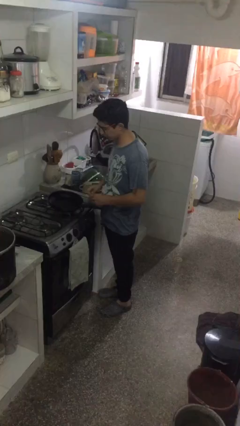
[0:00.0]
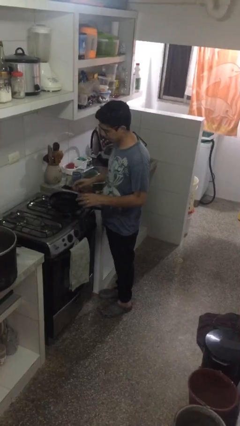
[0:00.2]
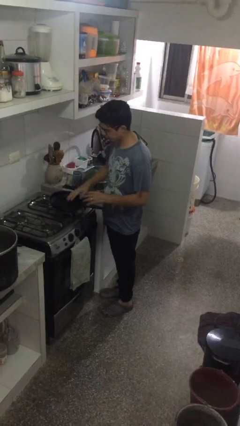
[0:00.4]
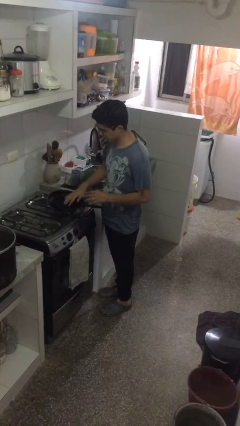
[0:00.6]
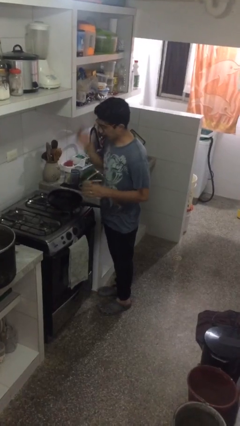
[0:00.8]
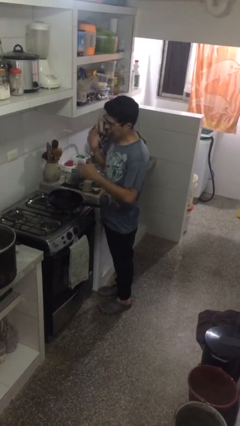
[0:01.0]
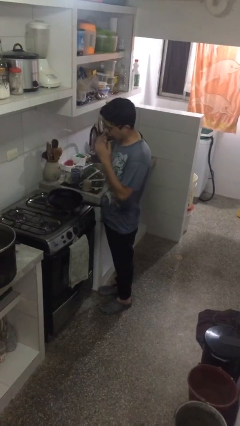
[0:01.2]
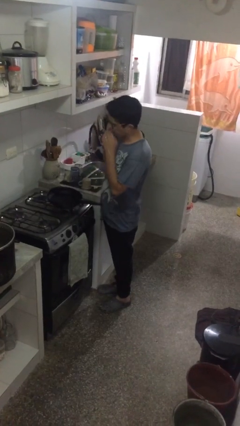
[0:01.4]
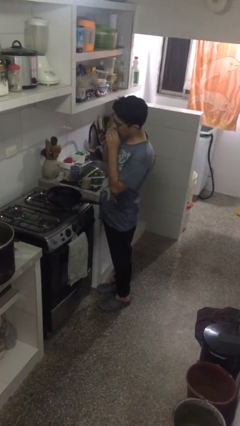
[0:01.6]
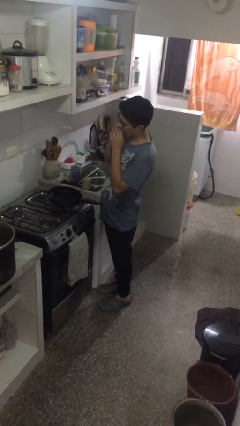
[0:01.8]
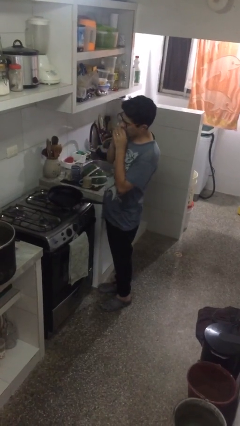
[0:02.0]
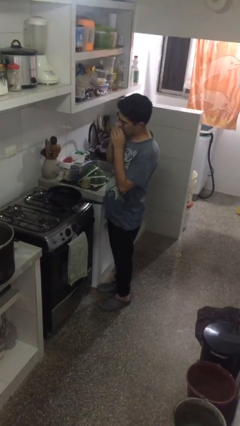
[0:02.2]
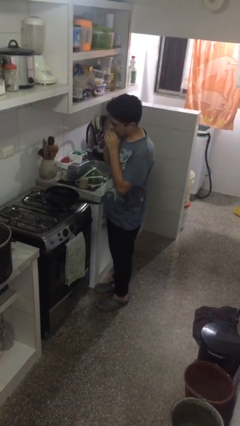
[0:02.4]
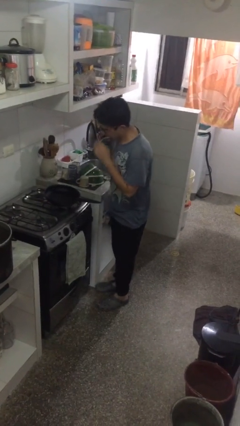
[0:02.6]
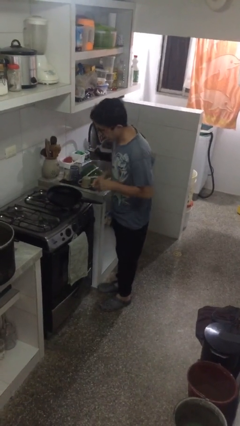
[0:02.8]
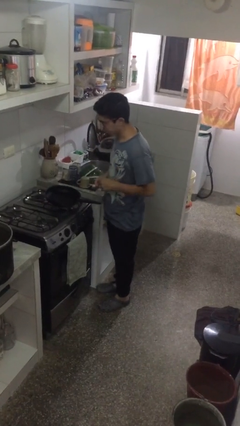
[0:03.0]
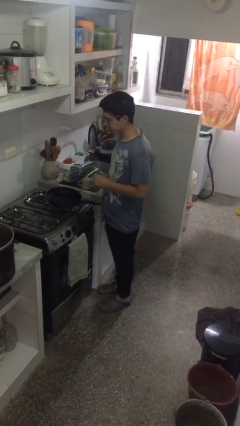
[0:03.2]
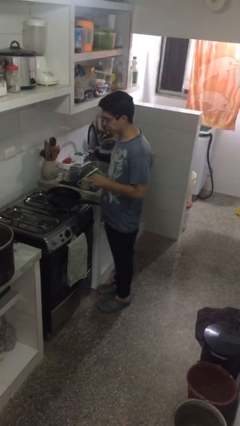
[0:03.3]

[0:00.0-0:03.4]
person burns hand

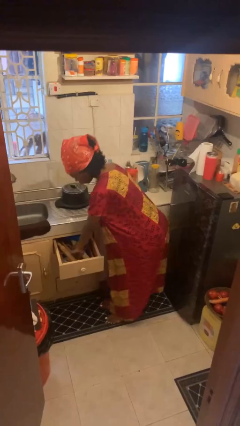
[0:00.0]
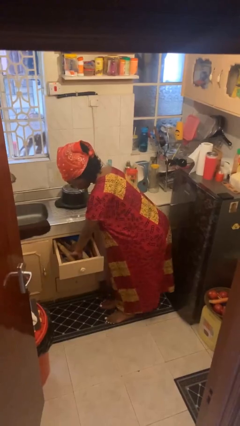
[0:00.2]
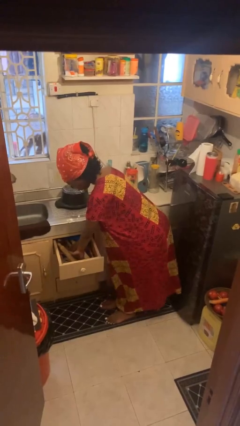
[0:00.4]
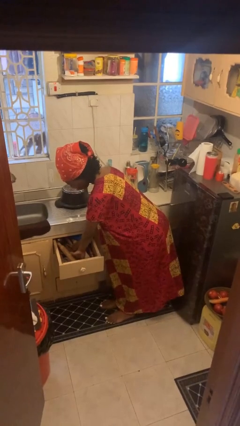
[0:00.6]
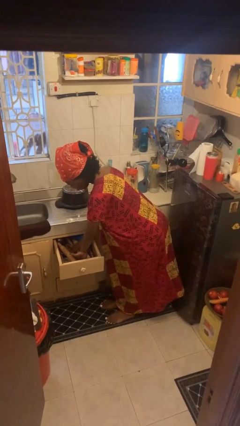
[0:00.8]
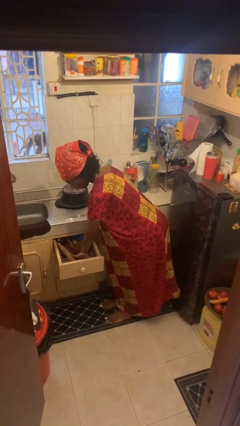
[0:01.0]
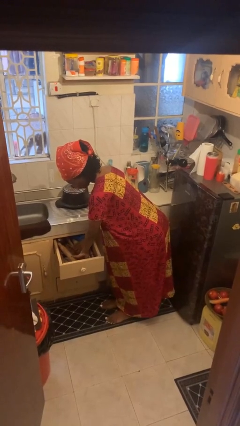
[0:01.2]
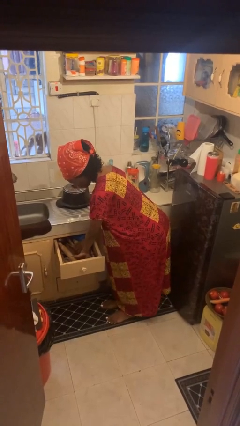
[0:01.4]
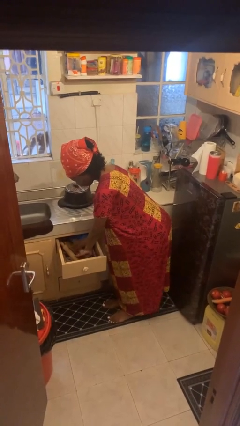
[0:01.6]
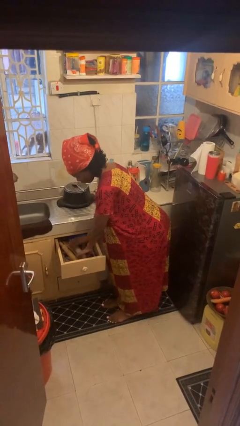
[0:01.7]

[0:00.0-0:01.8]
person searches in kitchen drawer

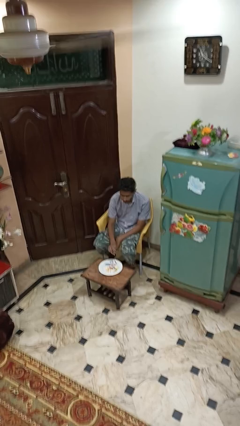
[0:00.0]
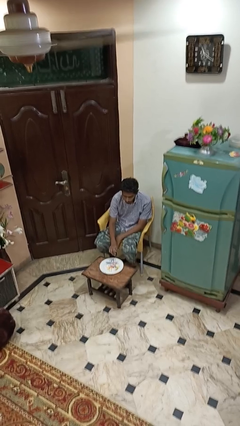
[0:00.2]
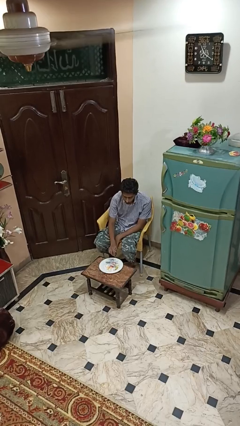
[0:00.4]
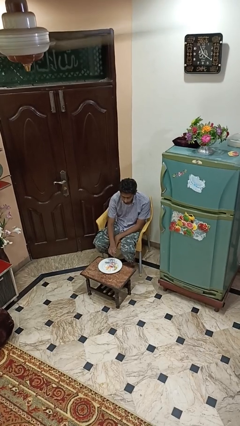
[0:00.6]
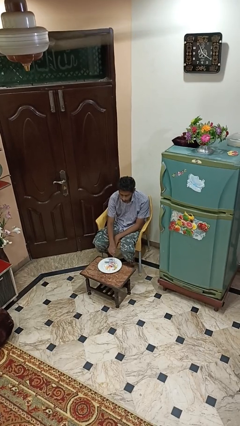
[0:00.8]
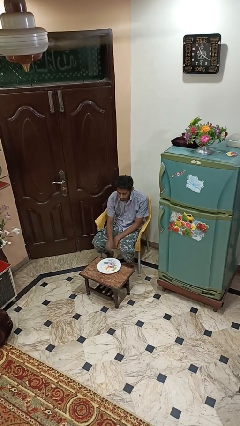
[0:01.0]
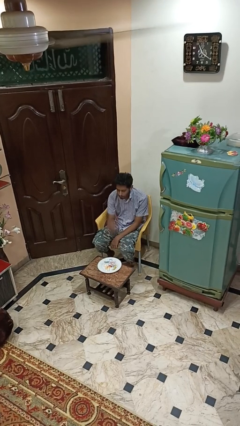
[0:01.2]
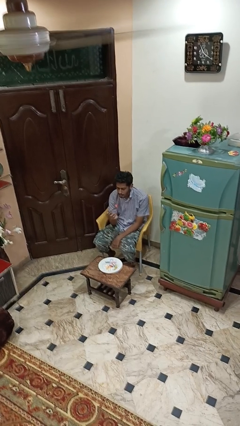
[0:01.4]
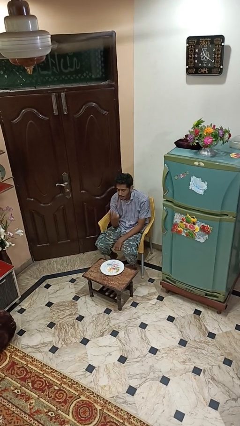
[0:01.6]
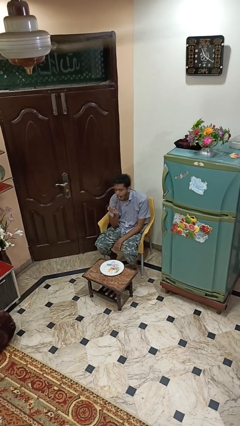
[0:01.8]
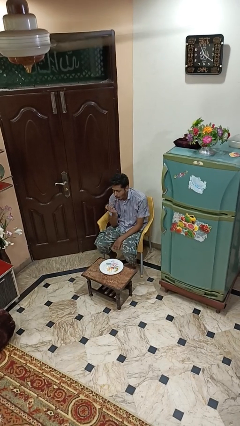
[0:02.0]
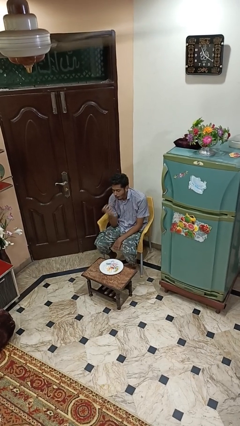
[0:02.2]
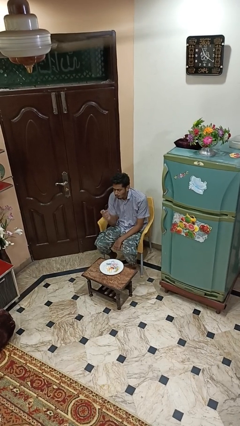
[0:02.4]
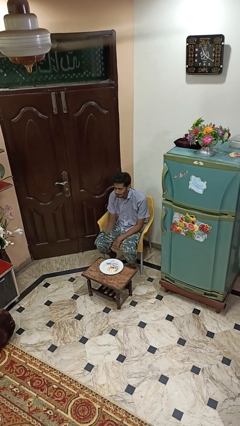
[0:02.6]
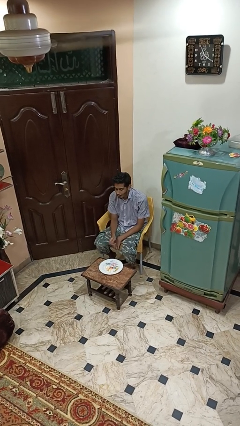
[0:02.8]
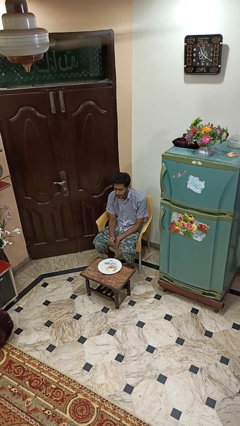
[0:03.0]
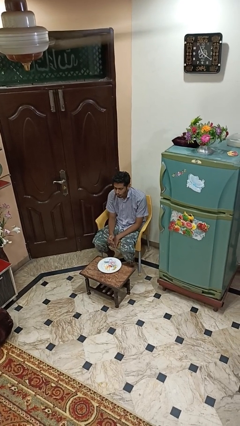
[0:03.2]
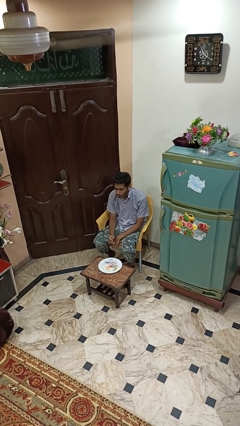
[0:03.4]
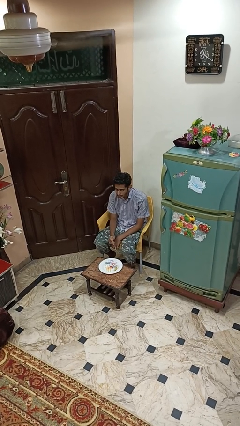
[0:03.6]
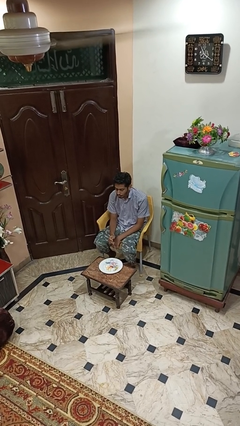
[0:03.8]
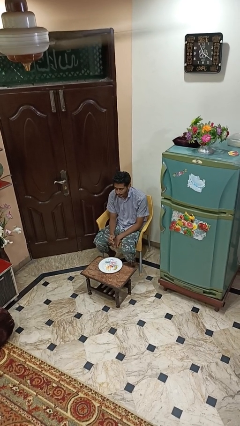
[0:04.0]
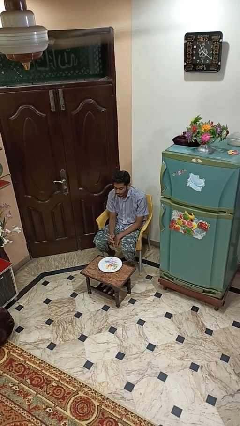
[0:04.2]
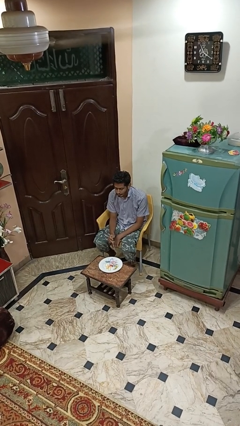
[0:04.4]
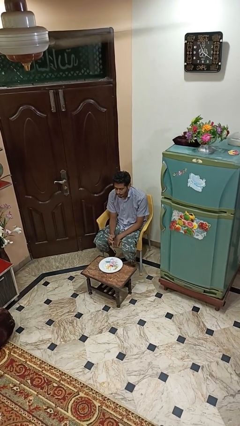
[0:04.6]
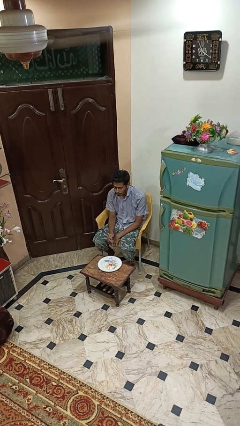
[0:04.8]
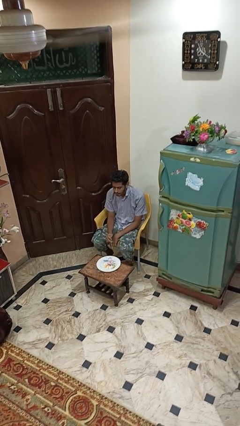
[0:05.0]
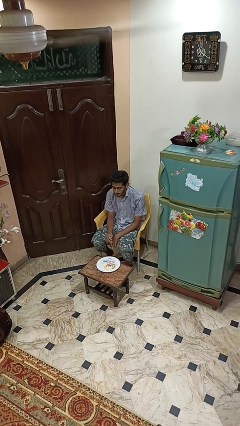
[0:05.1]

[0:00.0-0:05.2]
person eats with utensil

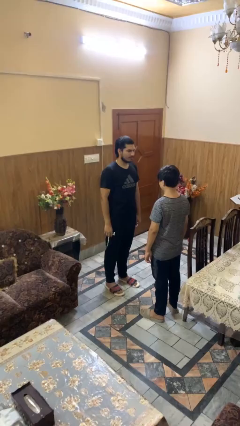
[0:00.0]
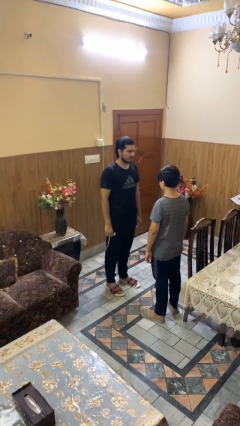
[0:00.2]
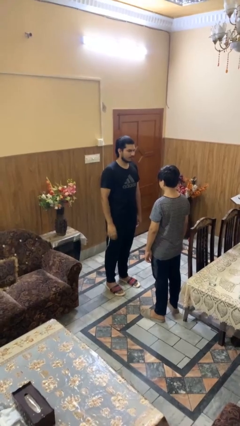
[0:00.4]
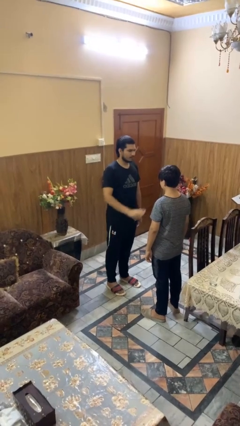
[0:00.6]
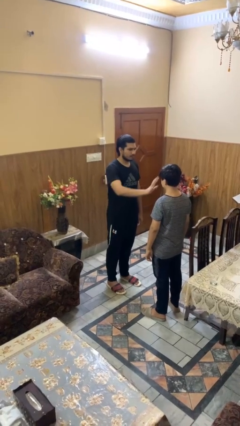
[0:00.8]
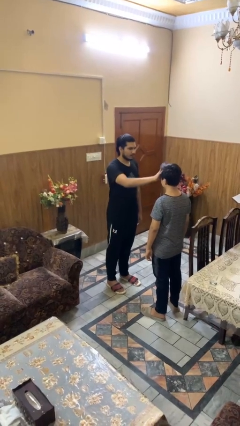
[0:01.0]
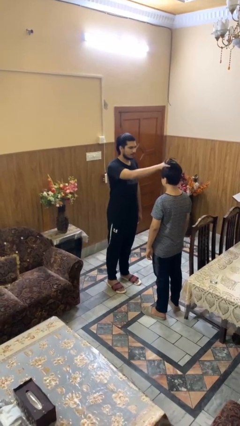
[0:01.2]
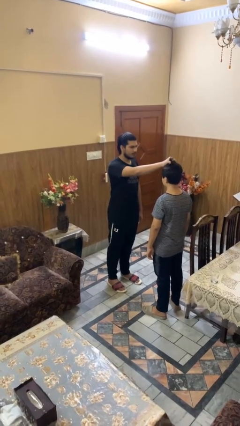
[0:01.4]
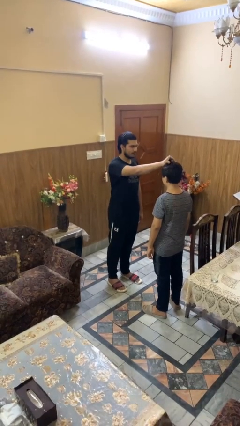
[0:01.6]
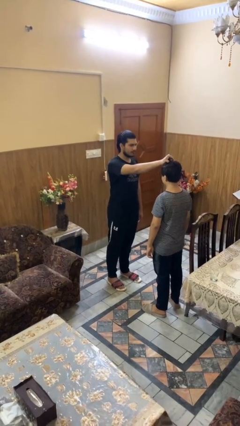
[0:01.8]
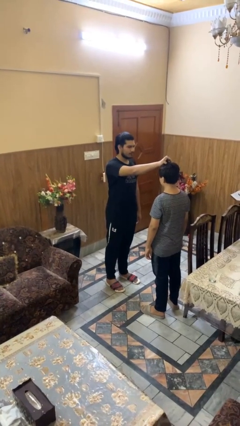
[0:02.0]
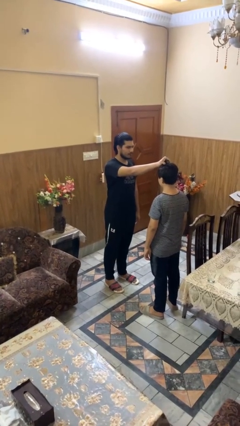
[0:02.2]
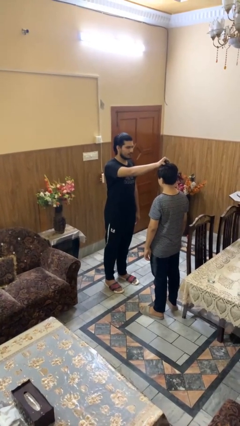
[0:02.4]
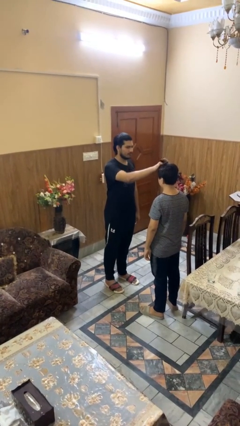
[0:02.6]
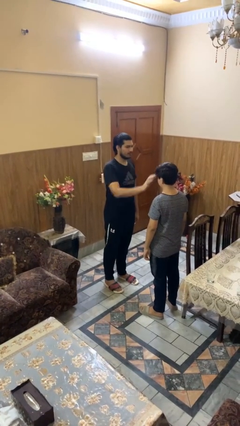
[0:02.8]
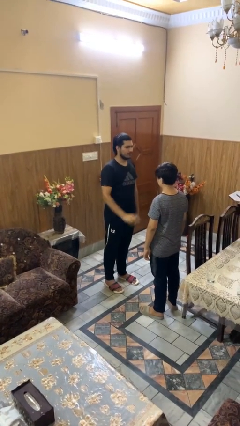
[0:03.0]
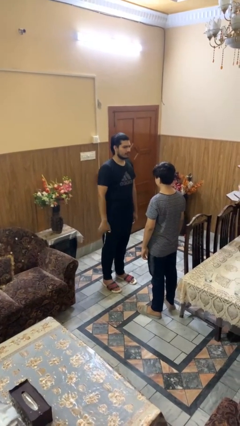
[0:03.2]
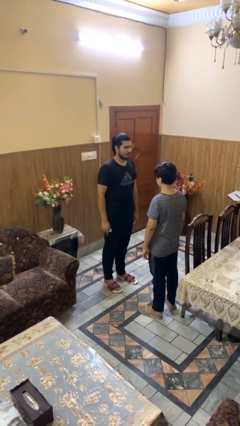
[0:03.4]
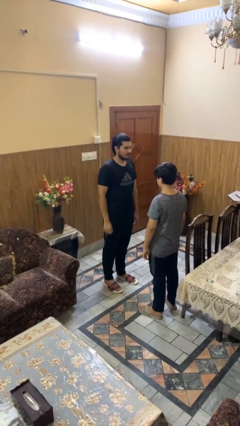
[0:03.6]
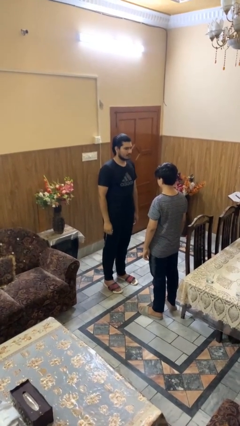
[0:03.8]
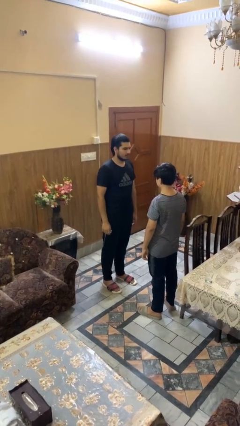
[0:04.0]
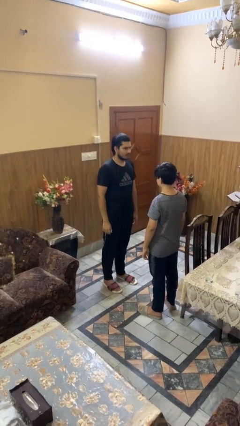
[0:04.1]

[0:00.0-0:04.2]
person grabs person by hair

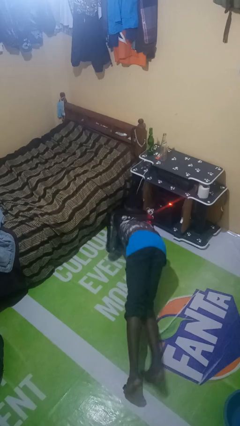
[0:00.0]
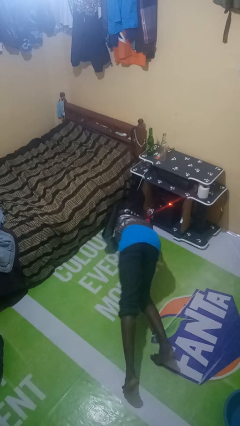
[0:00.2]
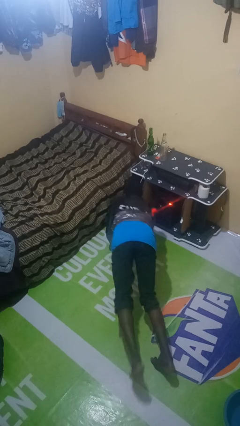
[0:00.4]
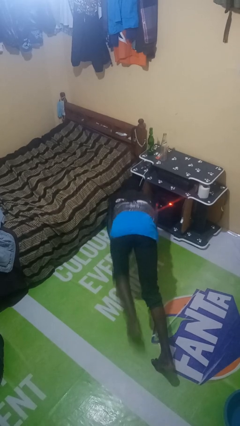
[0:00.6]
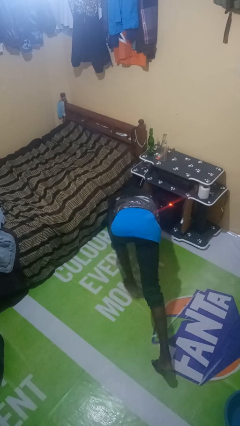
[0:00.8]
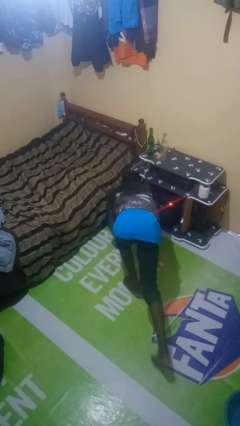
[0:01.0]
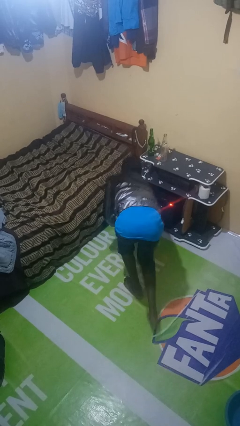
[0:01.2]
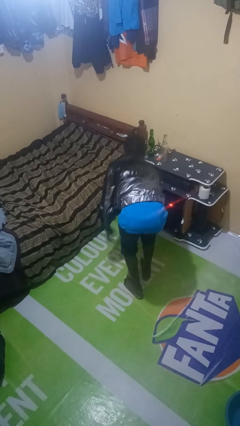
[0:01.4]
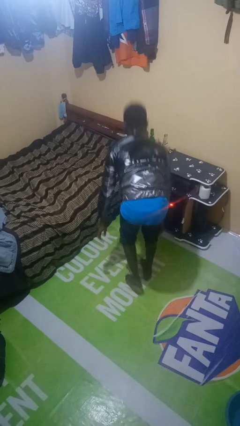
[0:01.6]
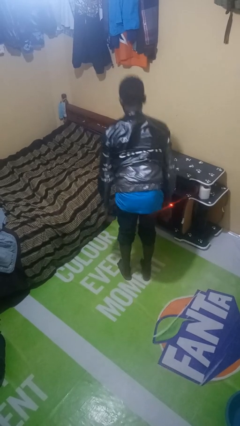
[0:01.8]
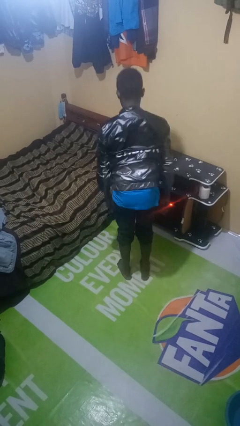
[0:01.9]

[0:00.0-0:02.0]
person stands up from floor

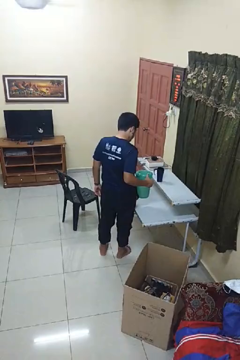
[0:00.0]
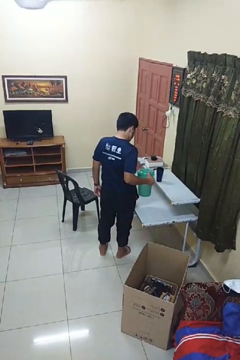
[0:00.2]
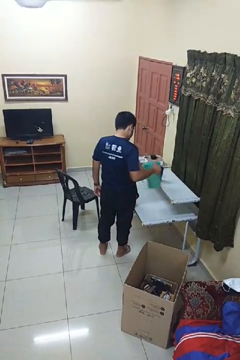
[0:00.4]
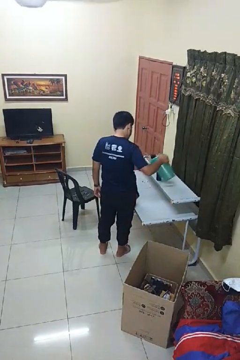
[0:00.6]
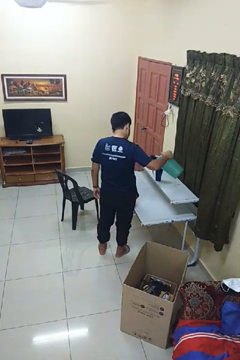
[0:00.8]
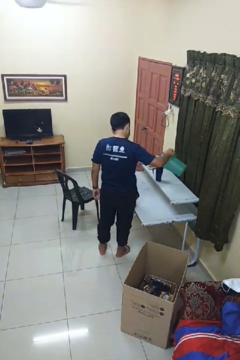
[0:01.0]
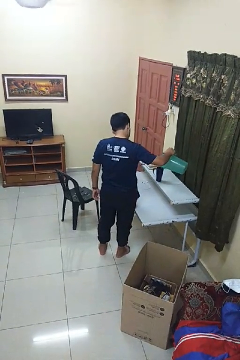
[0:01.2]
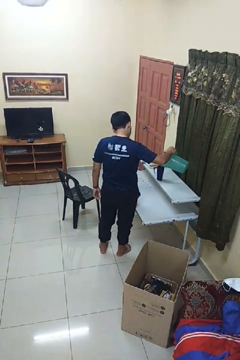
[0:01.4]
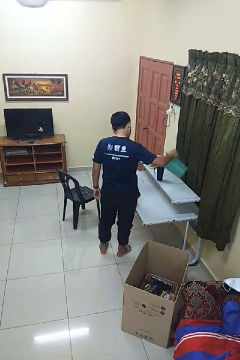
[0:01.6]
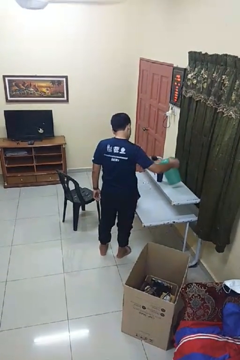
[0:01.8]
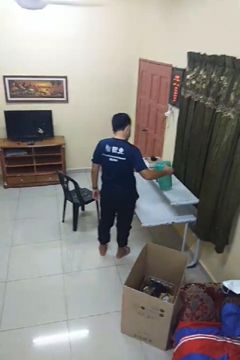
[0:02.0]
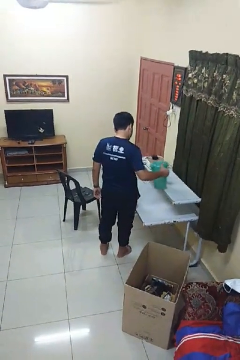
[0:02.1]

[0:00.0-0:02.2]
person pours coffee into mug
